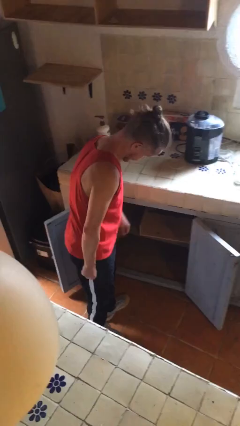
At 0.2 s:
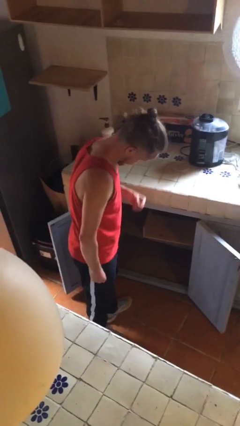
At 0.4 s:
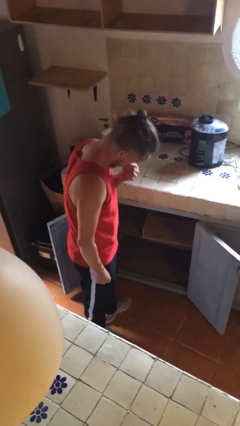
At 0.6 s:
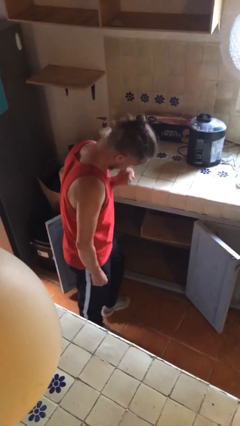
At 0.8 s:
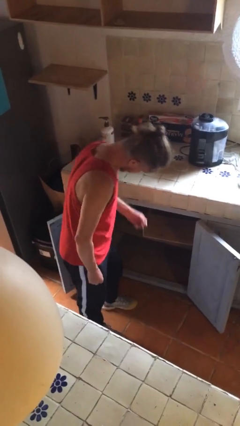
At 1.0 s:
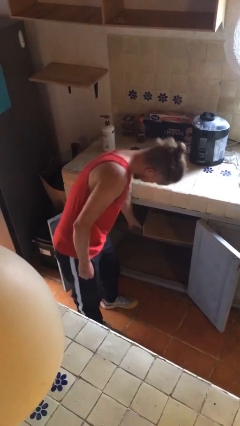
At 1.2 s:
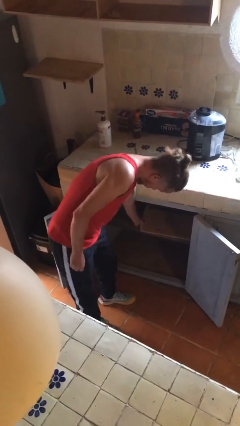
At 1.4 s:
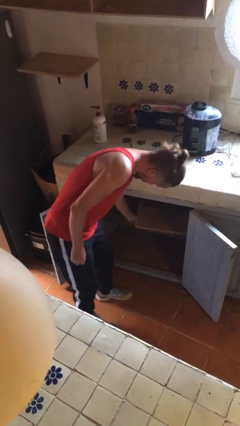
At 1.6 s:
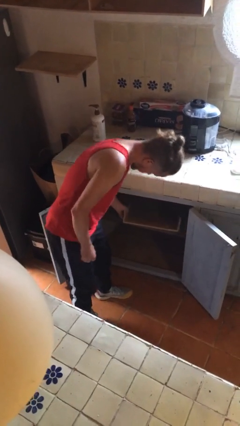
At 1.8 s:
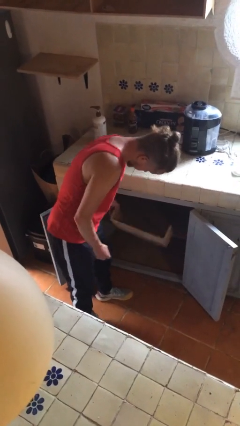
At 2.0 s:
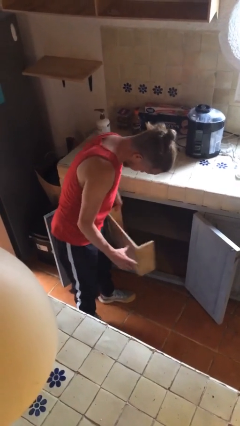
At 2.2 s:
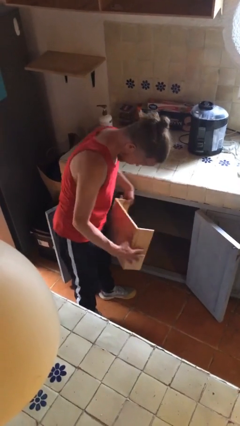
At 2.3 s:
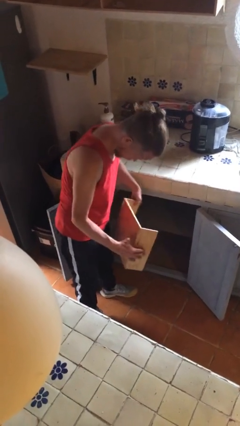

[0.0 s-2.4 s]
person picks up object from cabinet

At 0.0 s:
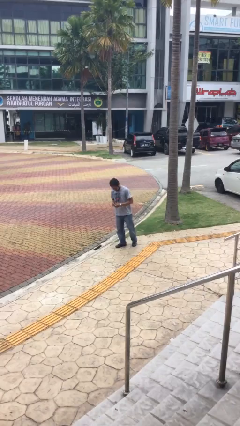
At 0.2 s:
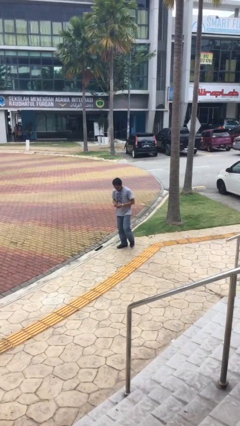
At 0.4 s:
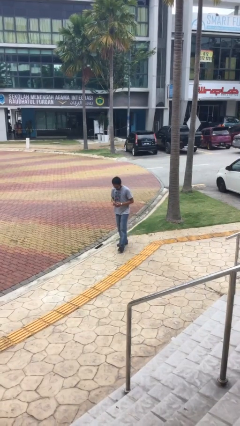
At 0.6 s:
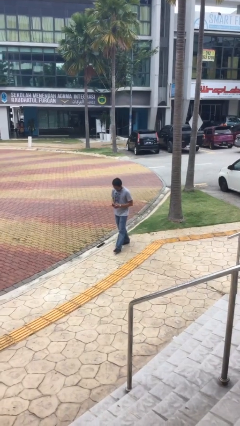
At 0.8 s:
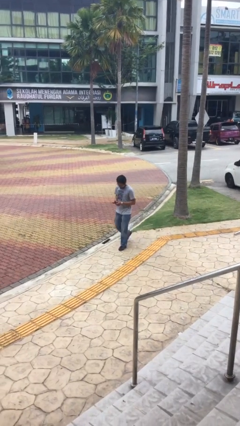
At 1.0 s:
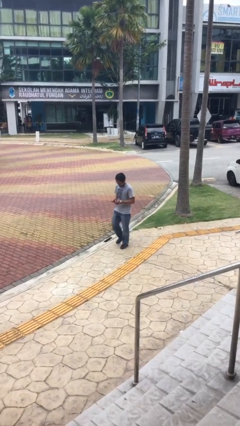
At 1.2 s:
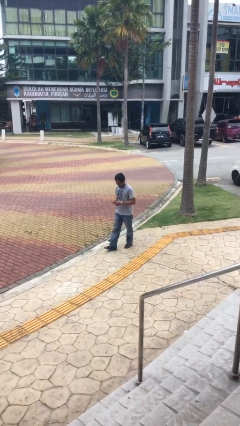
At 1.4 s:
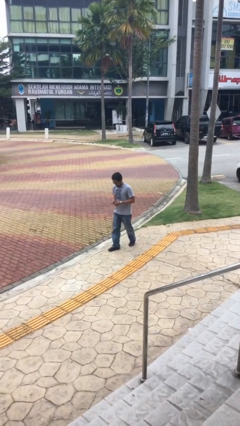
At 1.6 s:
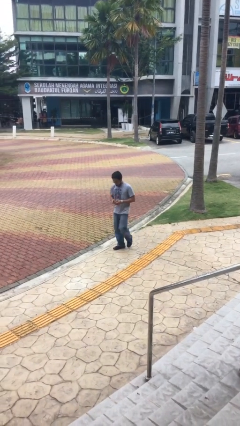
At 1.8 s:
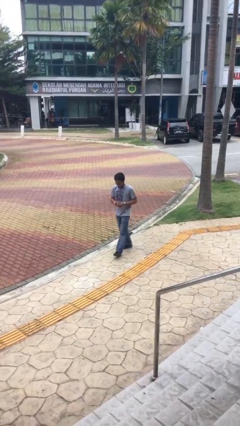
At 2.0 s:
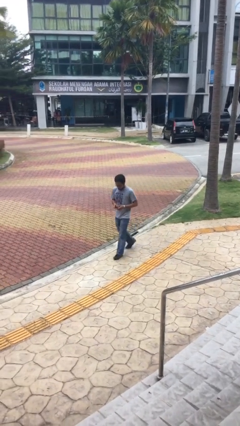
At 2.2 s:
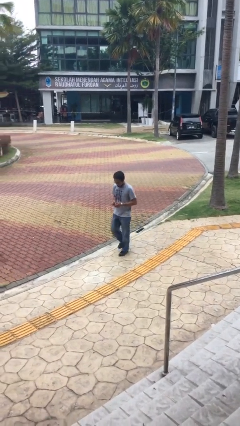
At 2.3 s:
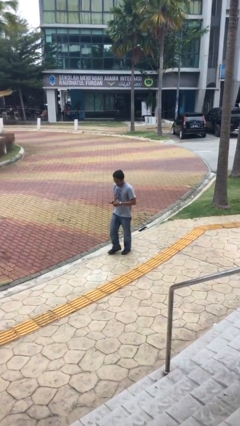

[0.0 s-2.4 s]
person texts on phone

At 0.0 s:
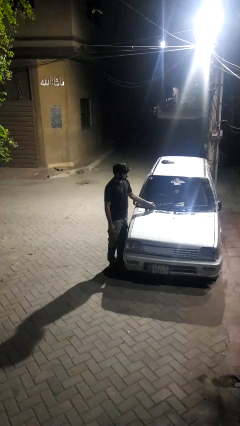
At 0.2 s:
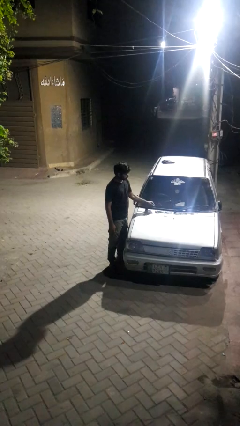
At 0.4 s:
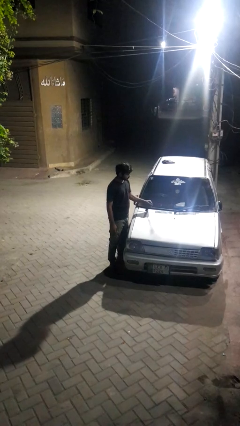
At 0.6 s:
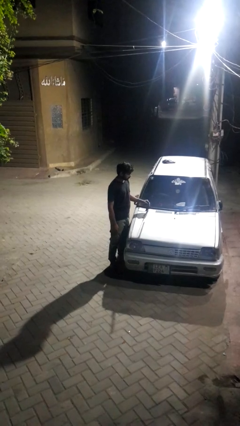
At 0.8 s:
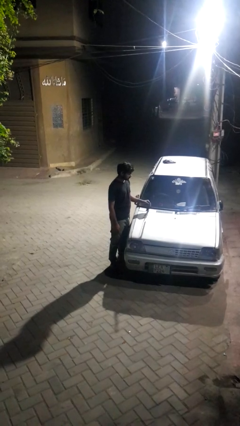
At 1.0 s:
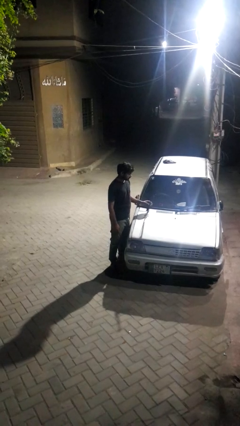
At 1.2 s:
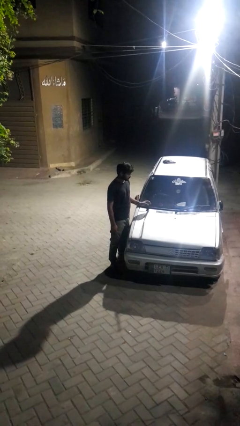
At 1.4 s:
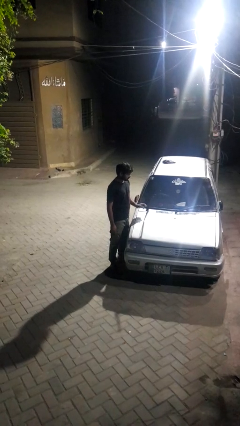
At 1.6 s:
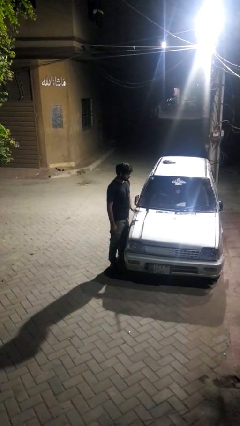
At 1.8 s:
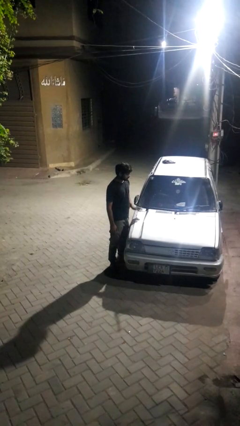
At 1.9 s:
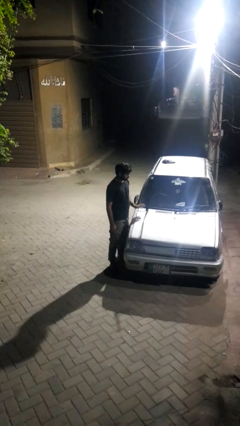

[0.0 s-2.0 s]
person flips up car wipers

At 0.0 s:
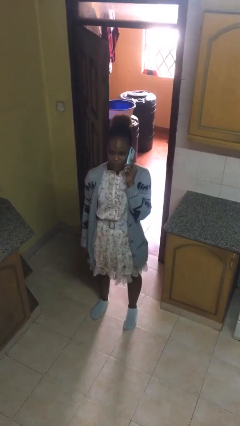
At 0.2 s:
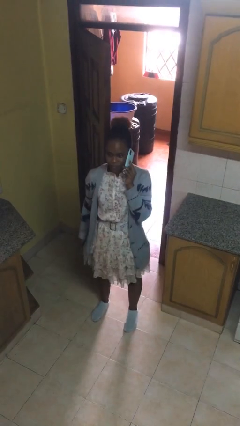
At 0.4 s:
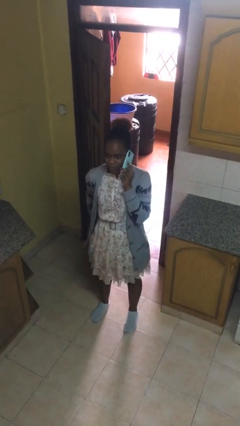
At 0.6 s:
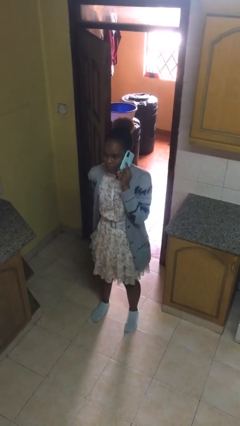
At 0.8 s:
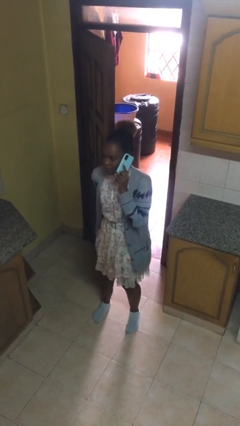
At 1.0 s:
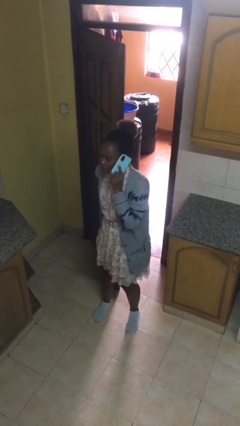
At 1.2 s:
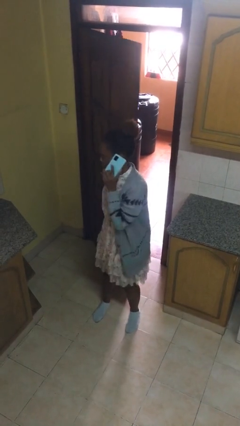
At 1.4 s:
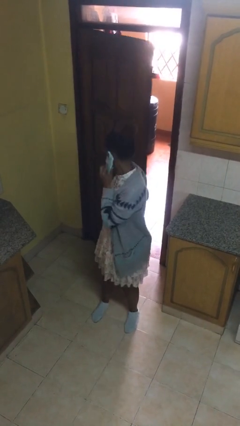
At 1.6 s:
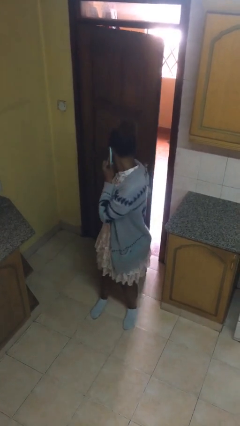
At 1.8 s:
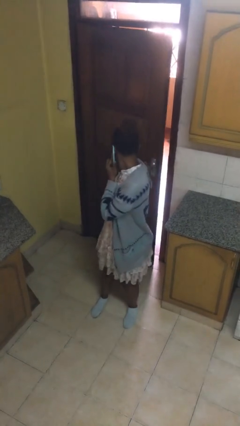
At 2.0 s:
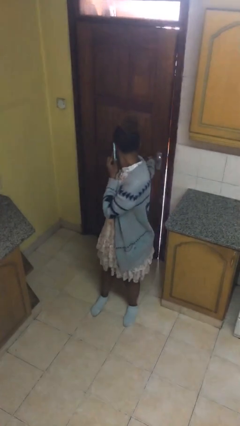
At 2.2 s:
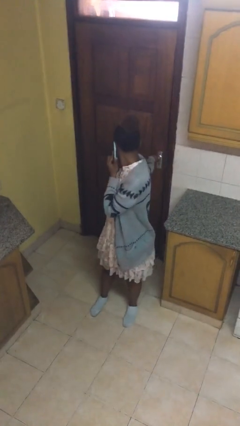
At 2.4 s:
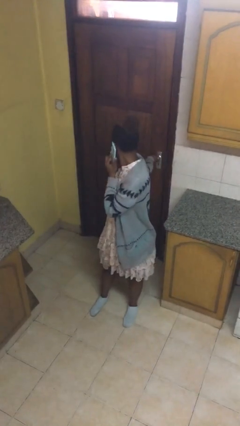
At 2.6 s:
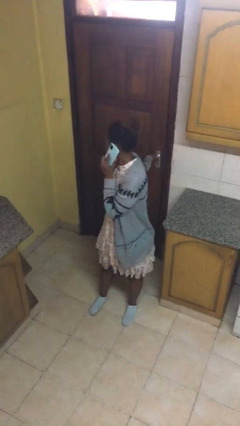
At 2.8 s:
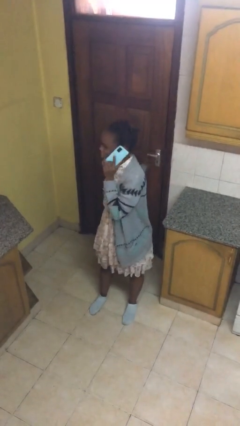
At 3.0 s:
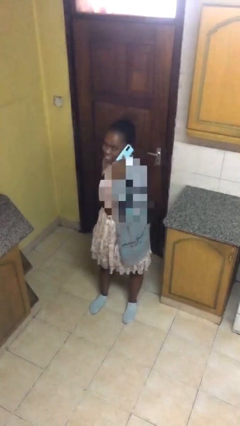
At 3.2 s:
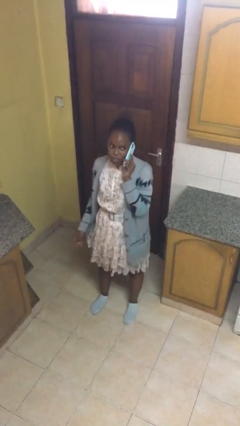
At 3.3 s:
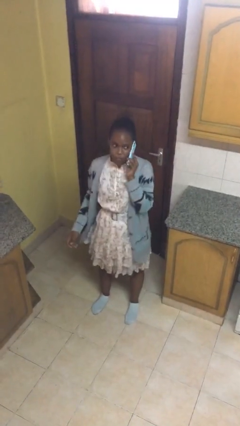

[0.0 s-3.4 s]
person closes facility door

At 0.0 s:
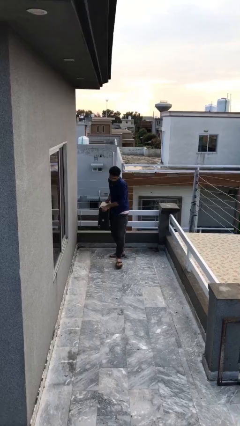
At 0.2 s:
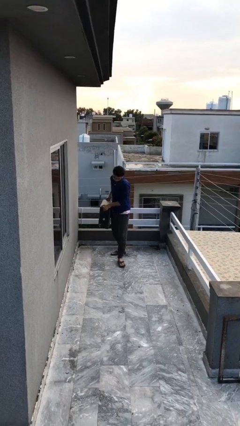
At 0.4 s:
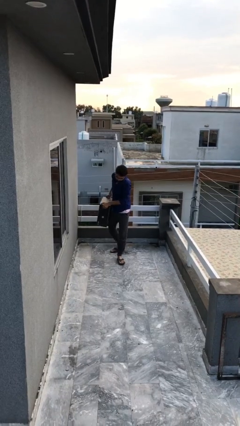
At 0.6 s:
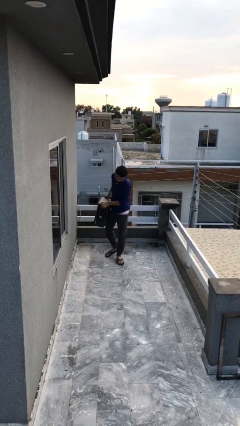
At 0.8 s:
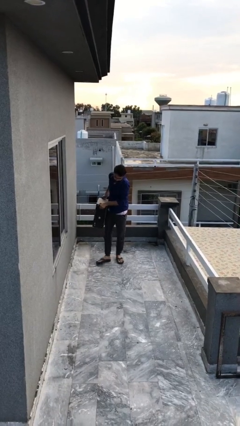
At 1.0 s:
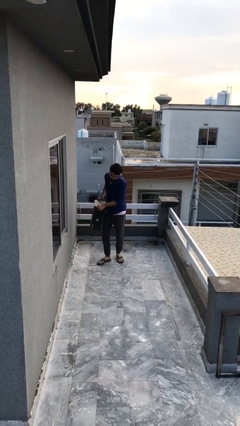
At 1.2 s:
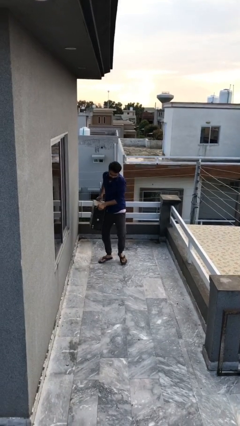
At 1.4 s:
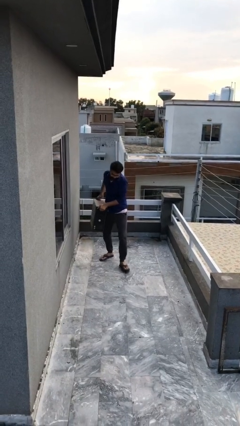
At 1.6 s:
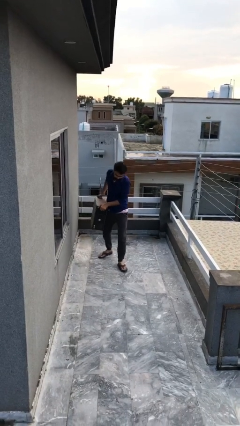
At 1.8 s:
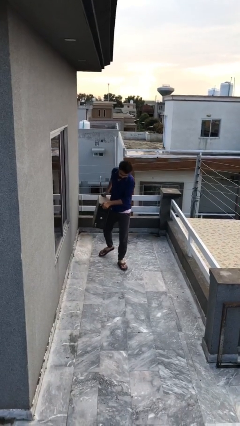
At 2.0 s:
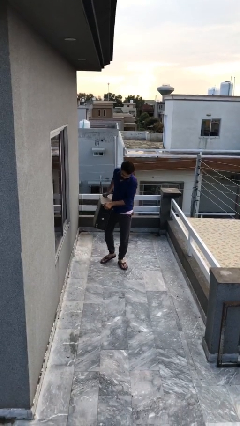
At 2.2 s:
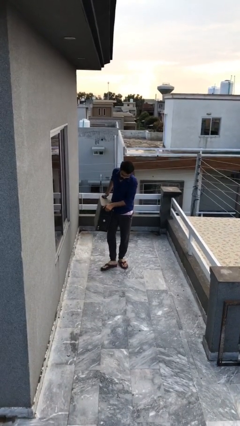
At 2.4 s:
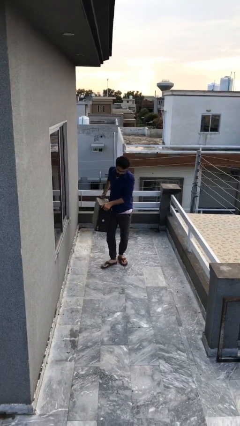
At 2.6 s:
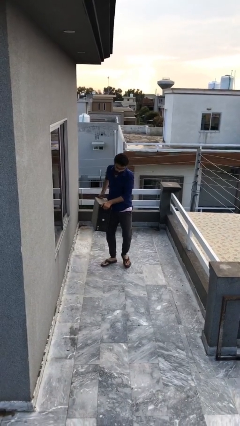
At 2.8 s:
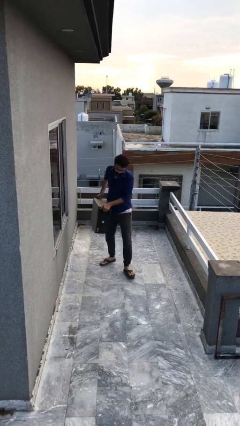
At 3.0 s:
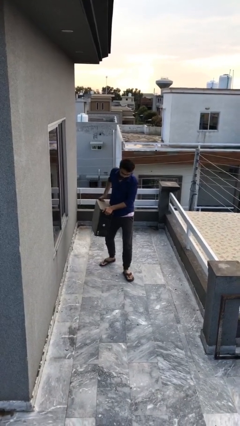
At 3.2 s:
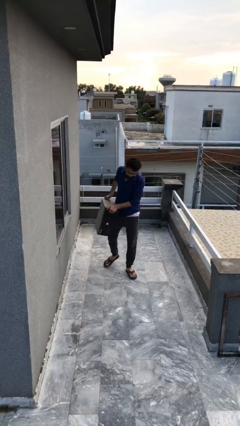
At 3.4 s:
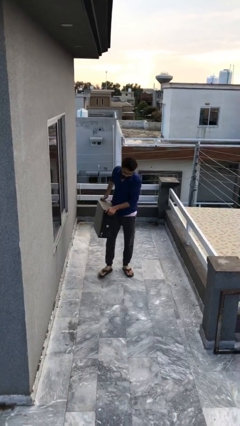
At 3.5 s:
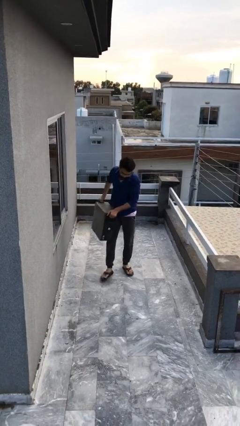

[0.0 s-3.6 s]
person carries heavy object

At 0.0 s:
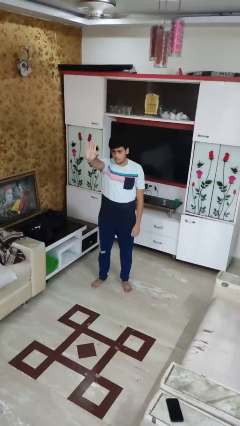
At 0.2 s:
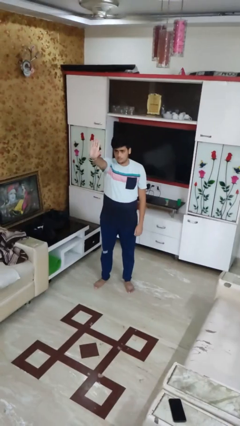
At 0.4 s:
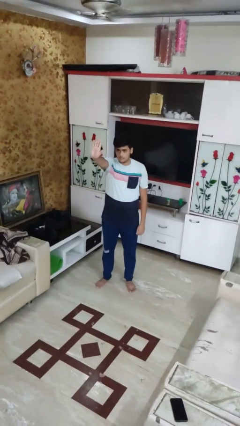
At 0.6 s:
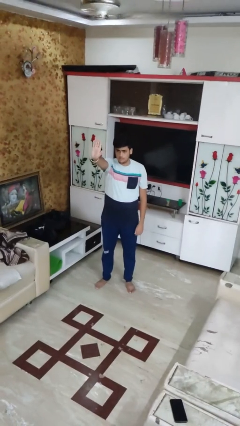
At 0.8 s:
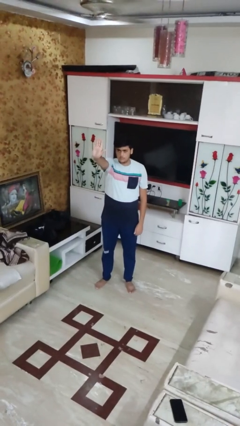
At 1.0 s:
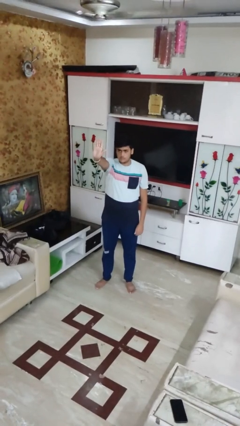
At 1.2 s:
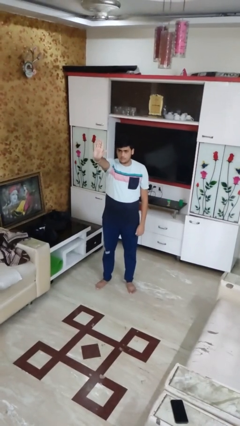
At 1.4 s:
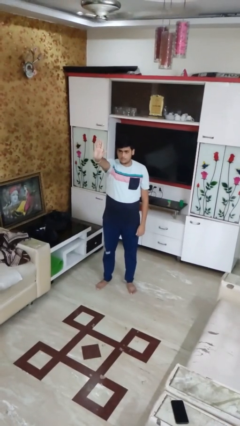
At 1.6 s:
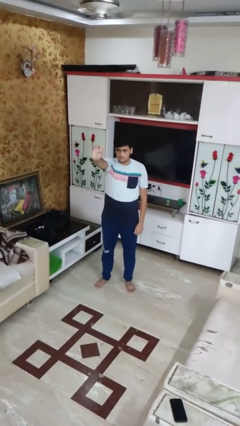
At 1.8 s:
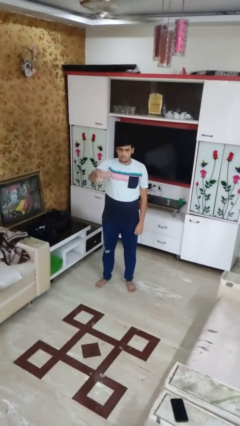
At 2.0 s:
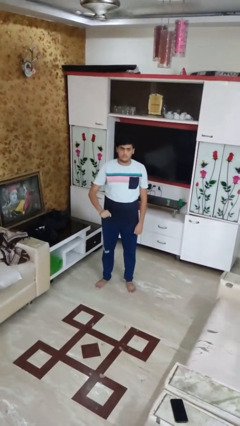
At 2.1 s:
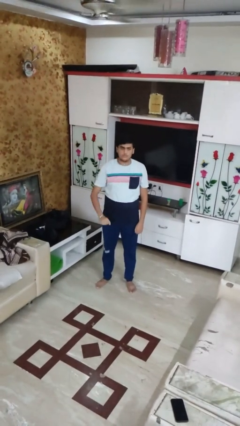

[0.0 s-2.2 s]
person gestures stop

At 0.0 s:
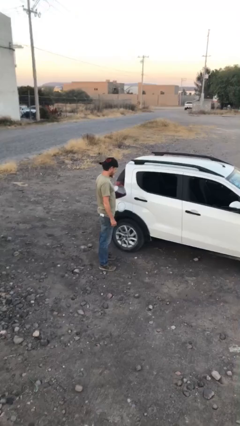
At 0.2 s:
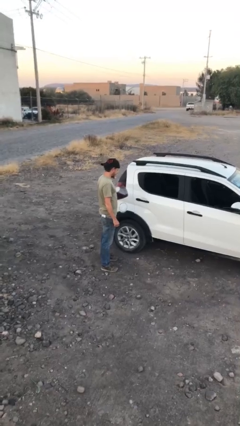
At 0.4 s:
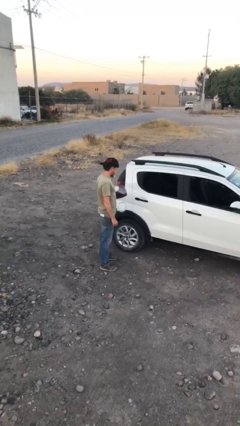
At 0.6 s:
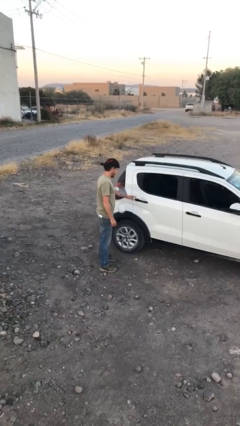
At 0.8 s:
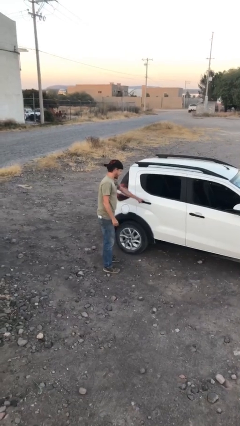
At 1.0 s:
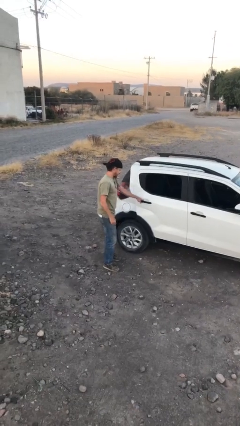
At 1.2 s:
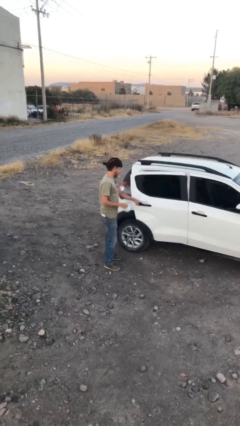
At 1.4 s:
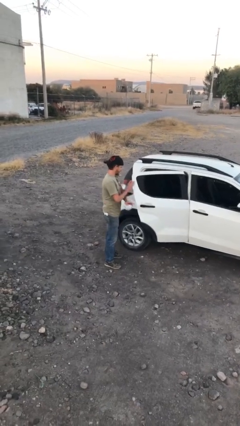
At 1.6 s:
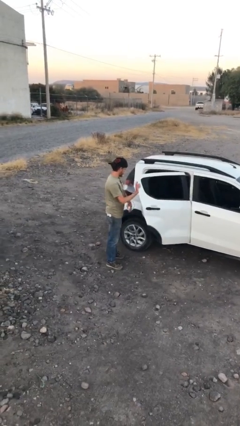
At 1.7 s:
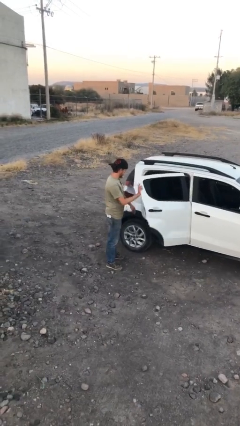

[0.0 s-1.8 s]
person opens car door
